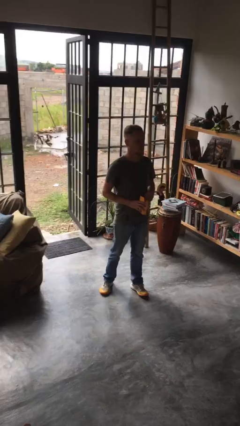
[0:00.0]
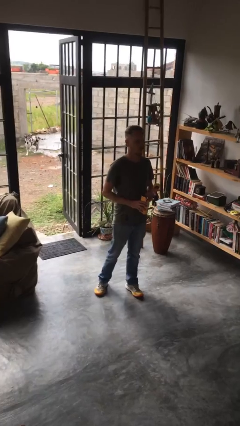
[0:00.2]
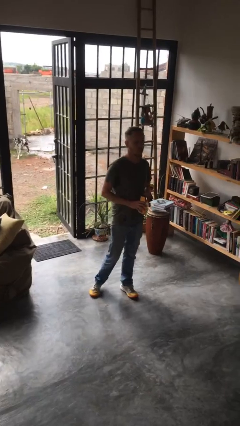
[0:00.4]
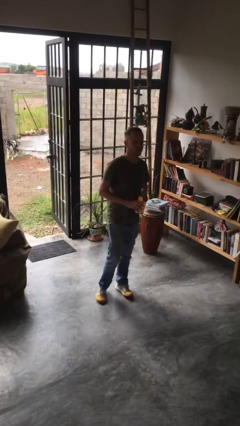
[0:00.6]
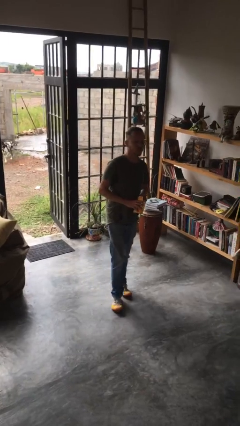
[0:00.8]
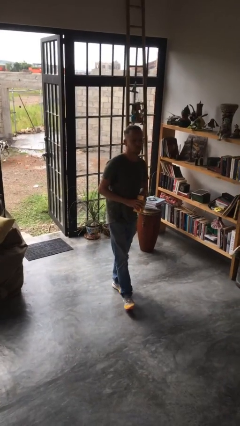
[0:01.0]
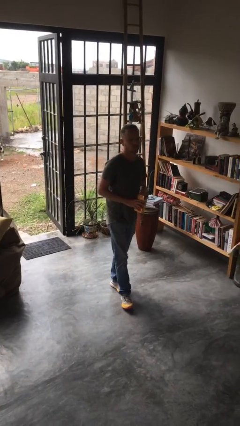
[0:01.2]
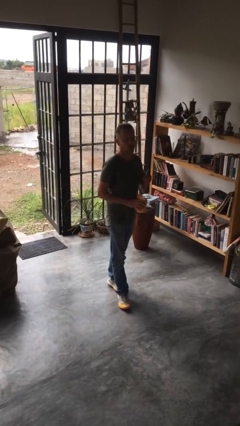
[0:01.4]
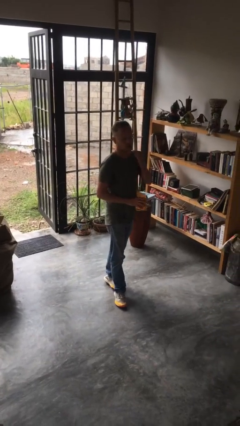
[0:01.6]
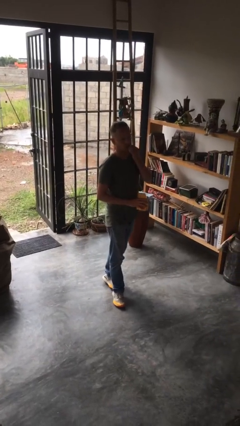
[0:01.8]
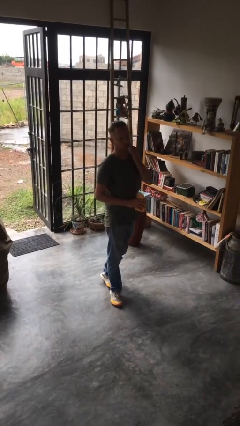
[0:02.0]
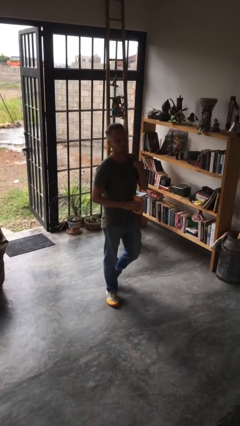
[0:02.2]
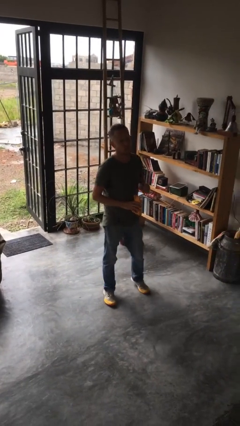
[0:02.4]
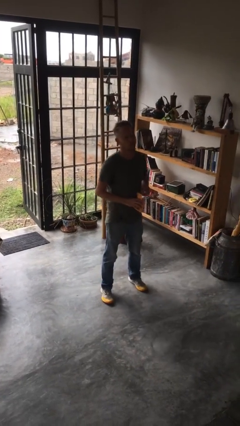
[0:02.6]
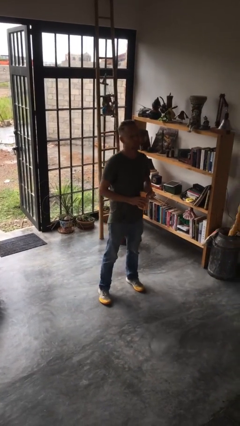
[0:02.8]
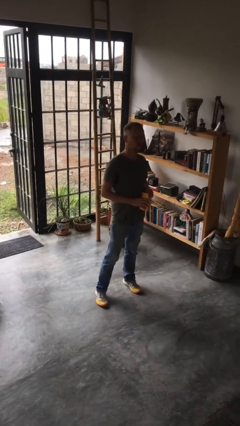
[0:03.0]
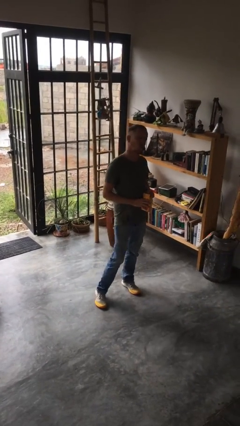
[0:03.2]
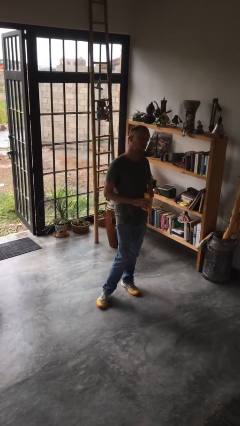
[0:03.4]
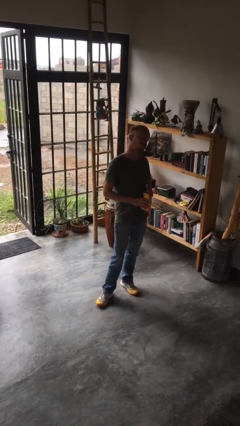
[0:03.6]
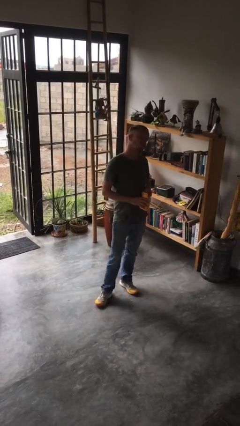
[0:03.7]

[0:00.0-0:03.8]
person eats snack from bag

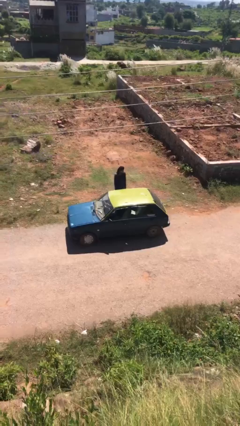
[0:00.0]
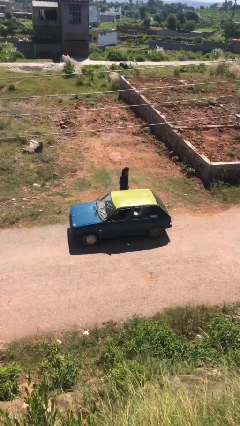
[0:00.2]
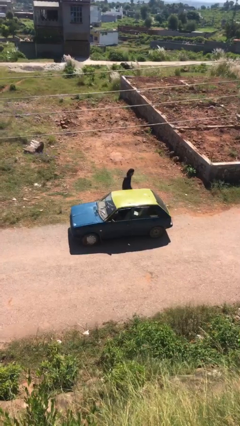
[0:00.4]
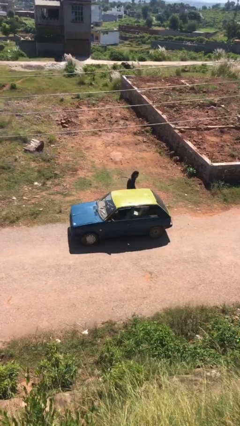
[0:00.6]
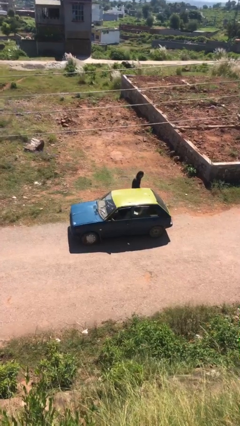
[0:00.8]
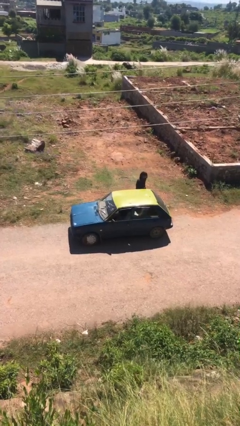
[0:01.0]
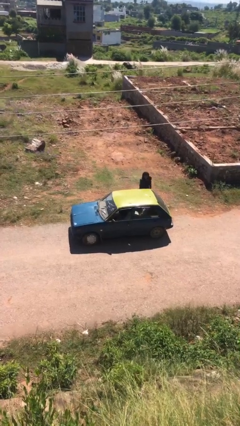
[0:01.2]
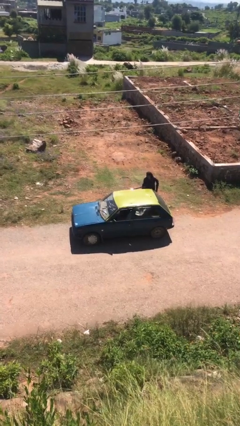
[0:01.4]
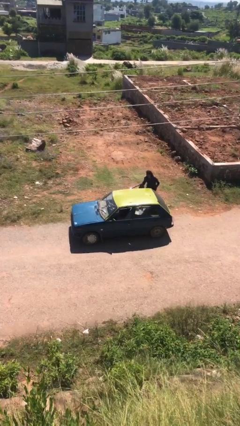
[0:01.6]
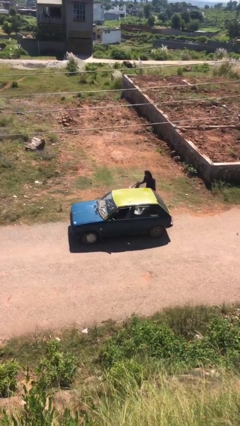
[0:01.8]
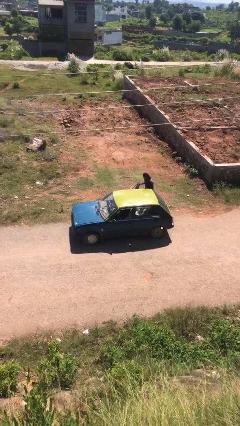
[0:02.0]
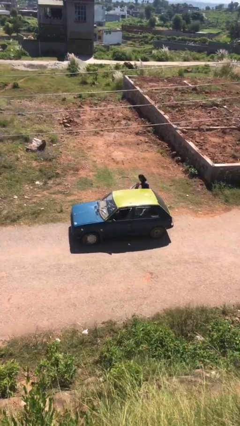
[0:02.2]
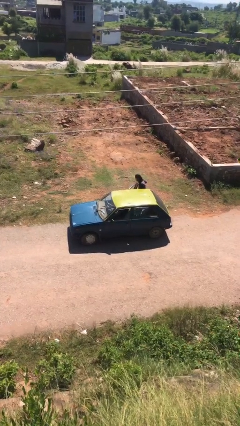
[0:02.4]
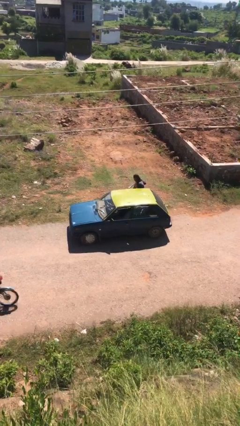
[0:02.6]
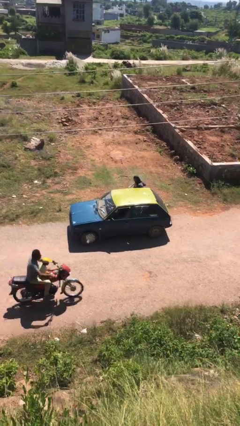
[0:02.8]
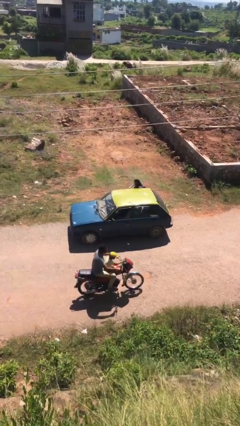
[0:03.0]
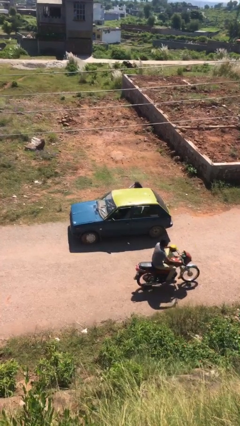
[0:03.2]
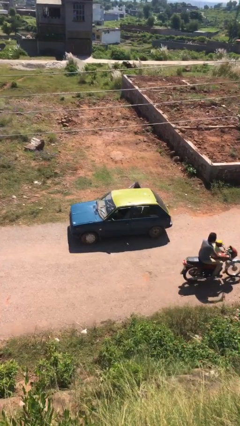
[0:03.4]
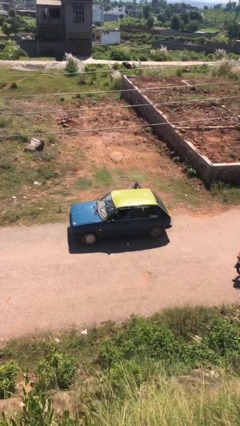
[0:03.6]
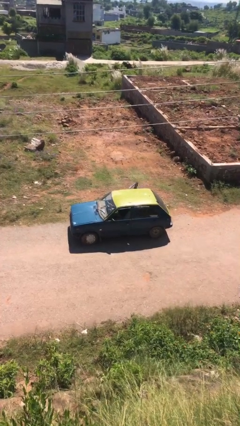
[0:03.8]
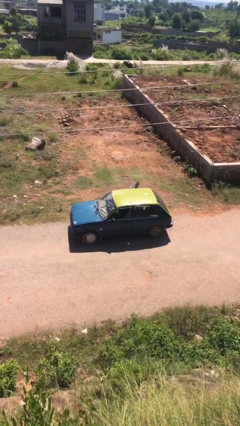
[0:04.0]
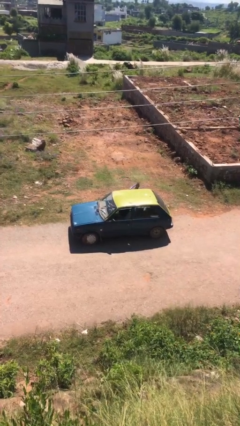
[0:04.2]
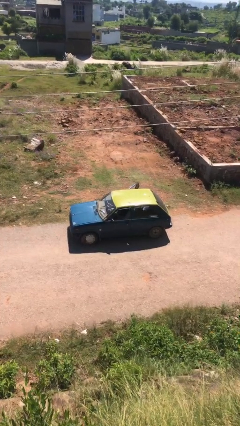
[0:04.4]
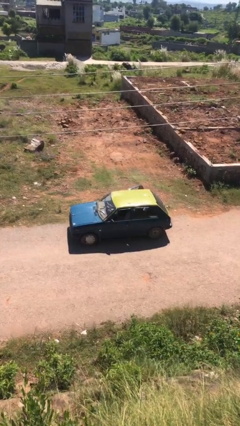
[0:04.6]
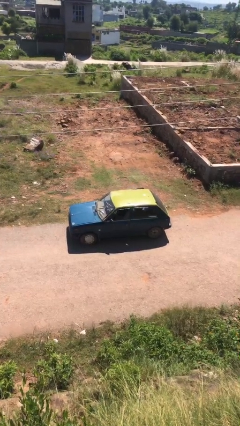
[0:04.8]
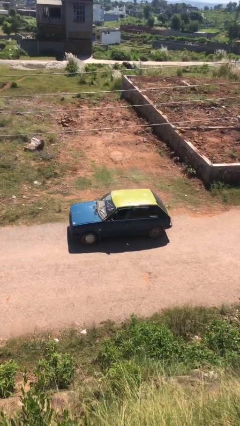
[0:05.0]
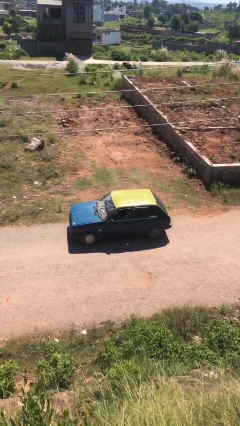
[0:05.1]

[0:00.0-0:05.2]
car picks up person

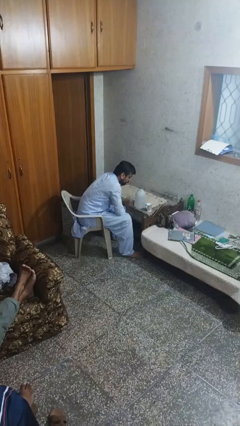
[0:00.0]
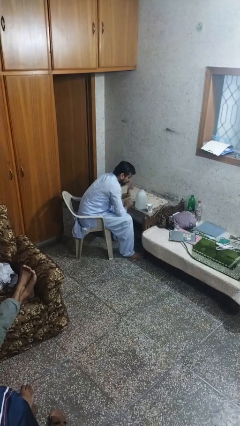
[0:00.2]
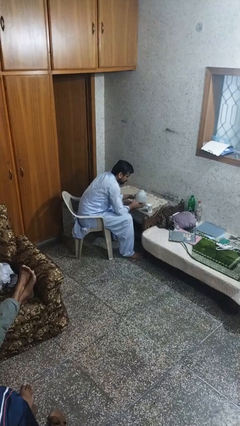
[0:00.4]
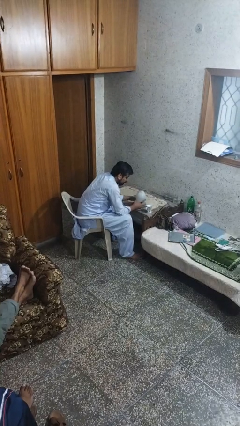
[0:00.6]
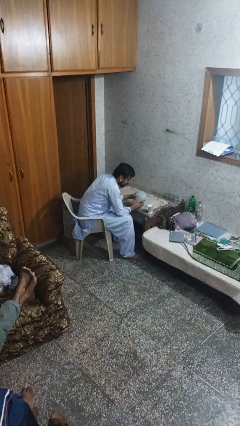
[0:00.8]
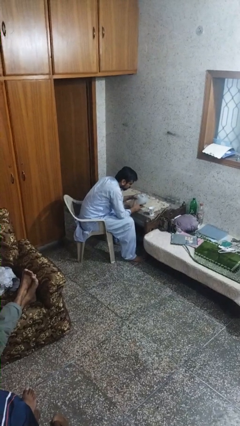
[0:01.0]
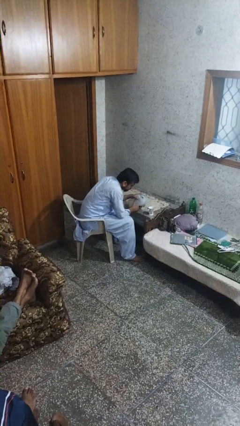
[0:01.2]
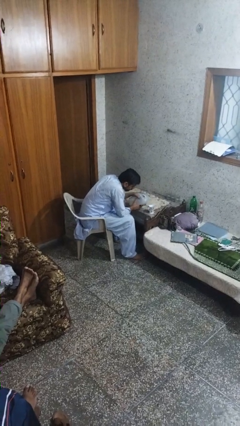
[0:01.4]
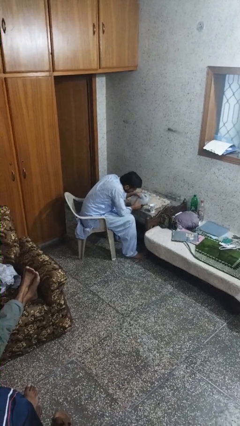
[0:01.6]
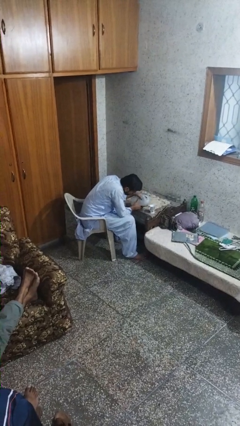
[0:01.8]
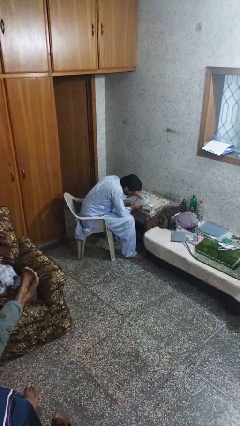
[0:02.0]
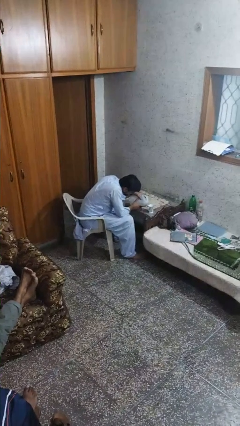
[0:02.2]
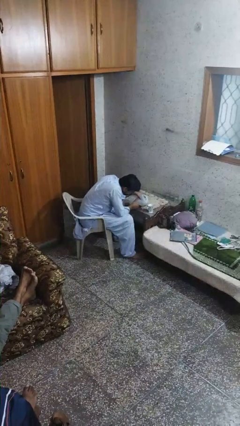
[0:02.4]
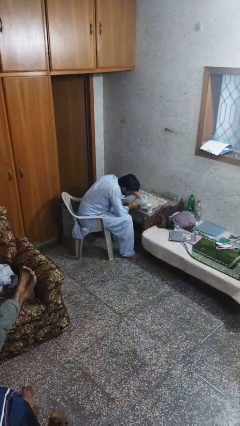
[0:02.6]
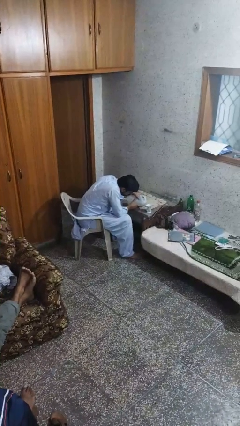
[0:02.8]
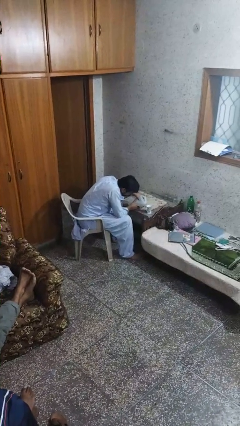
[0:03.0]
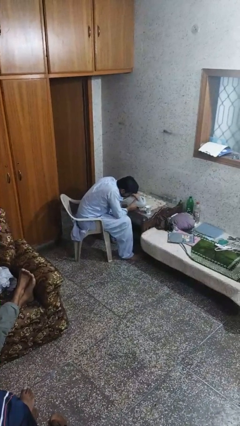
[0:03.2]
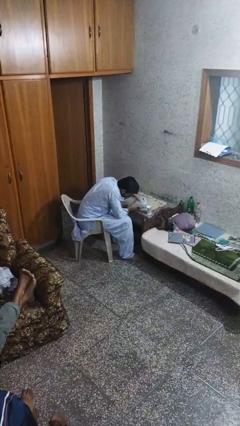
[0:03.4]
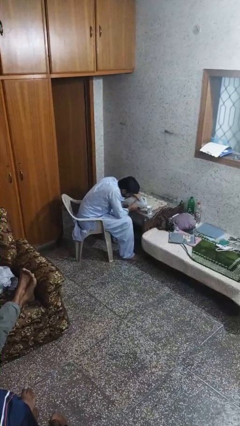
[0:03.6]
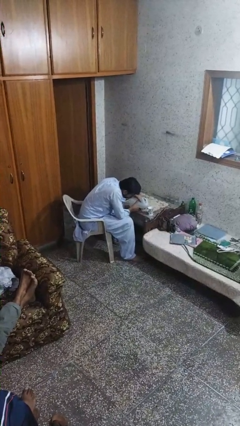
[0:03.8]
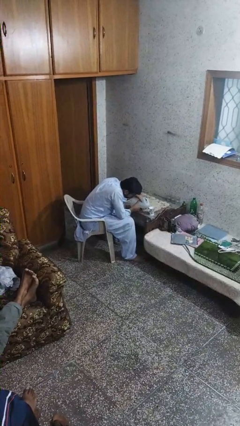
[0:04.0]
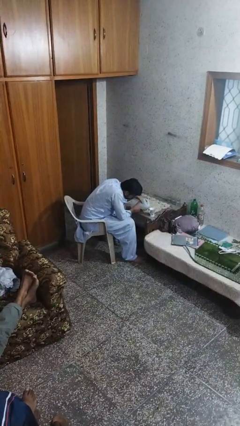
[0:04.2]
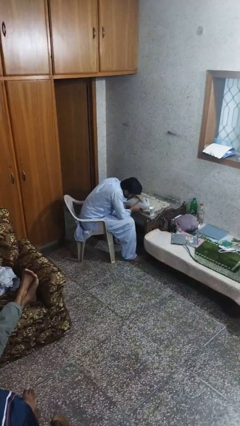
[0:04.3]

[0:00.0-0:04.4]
person pours liquid into cup

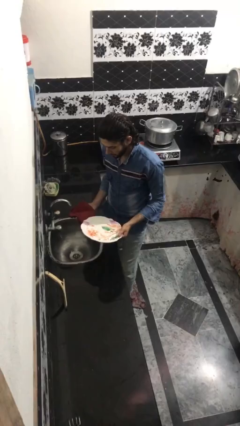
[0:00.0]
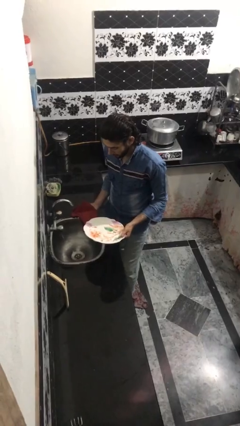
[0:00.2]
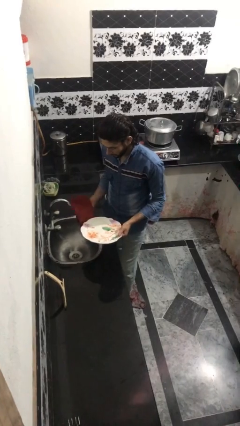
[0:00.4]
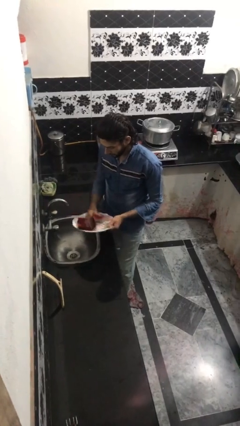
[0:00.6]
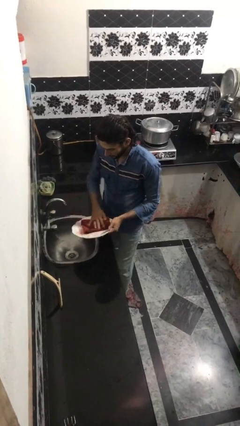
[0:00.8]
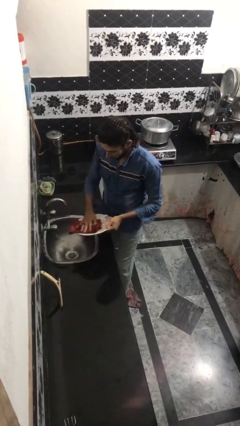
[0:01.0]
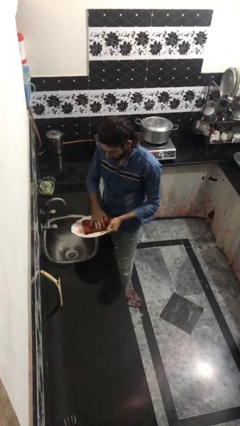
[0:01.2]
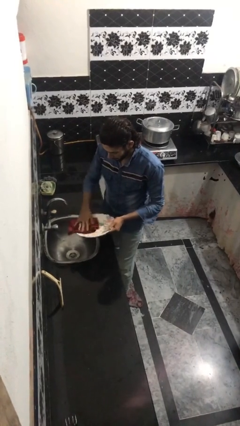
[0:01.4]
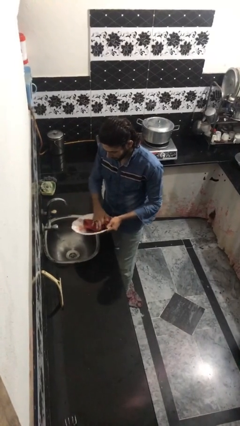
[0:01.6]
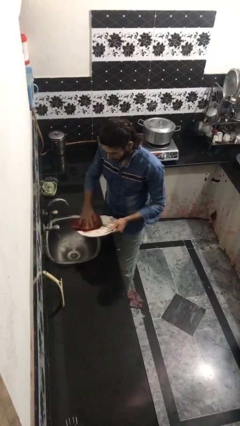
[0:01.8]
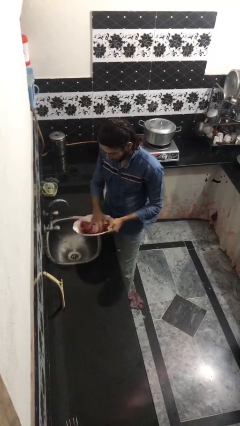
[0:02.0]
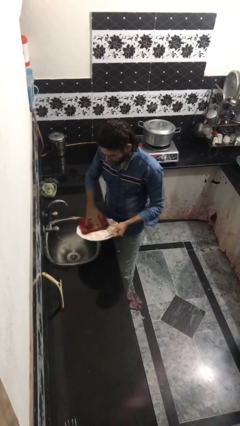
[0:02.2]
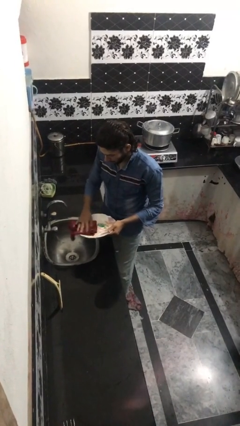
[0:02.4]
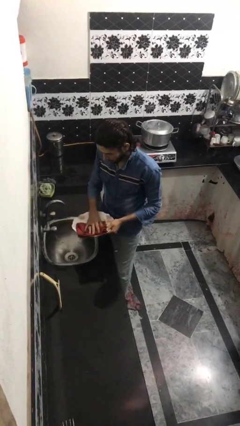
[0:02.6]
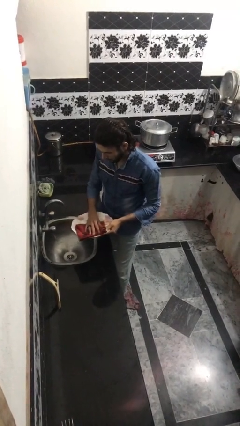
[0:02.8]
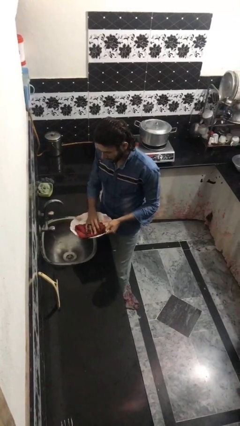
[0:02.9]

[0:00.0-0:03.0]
person dries dish

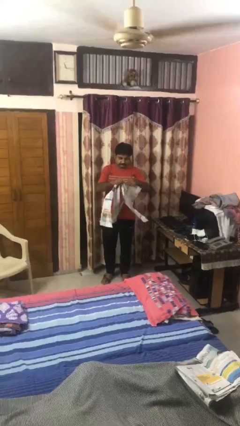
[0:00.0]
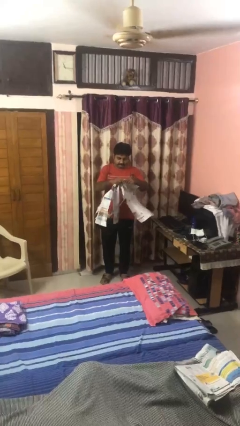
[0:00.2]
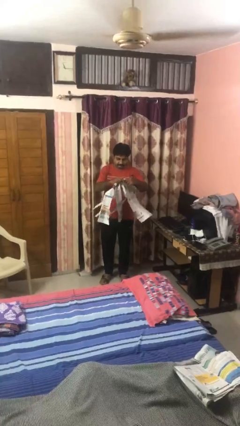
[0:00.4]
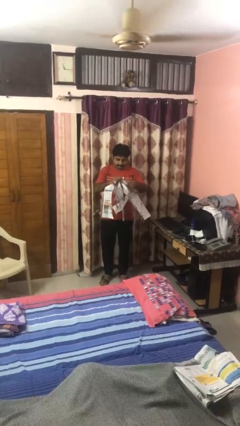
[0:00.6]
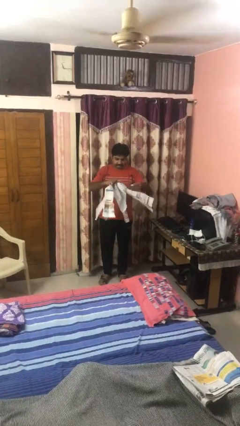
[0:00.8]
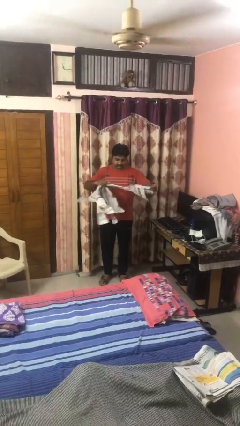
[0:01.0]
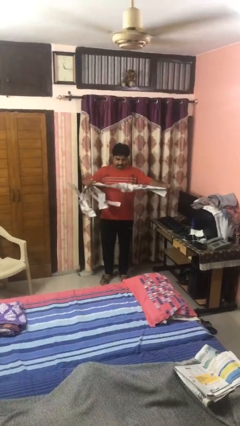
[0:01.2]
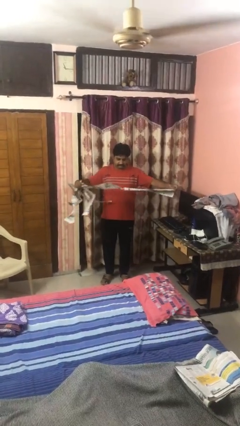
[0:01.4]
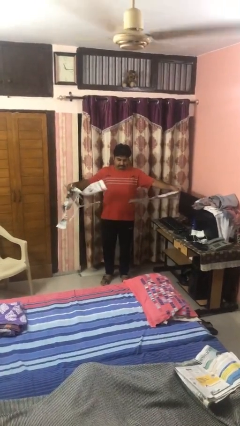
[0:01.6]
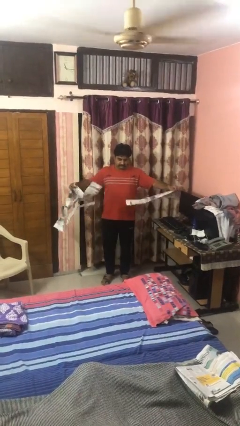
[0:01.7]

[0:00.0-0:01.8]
person tears paper
